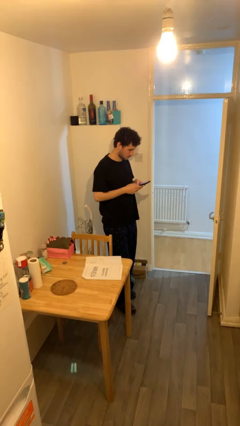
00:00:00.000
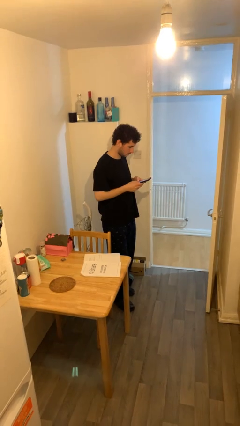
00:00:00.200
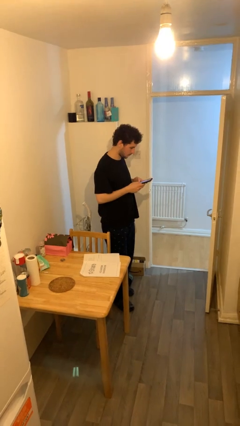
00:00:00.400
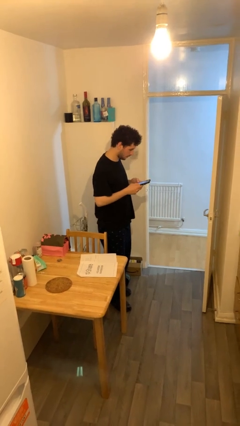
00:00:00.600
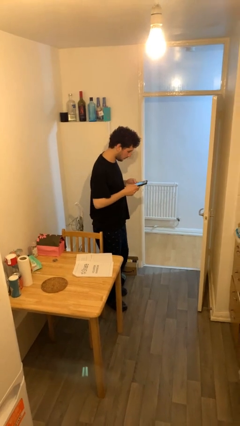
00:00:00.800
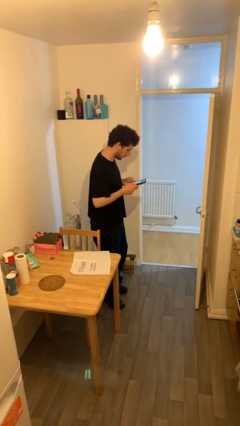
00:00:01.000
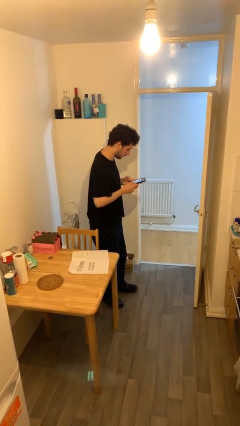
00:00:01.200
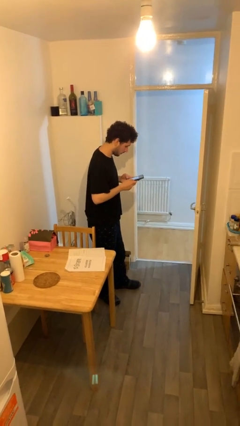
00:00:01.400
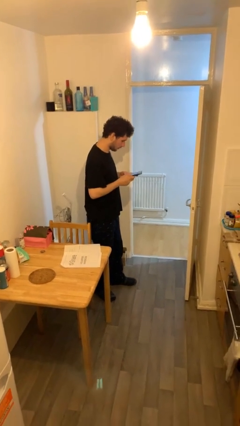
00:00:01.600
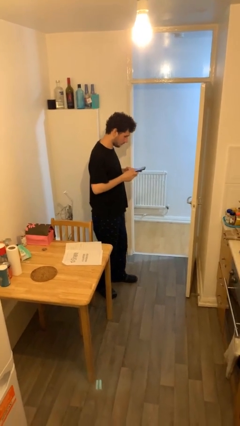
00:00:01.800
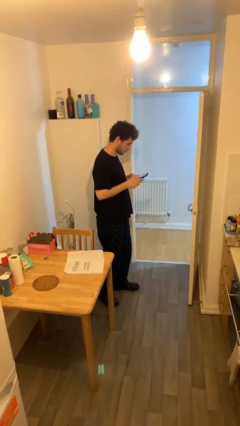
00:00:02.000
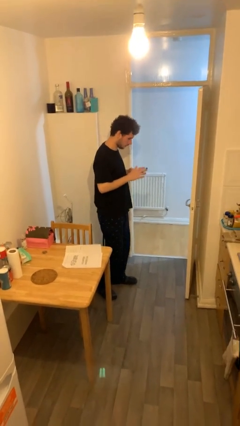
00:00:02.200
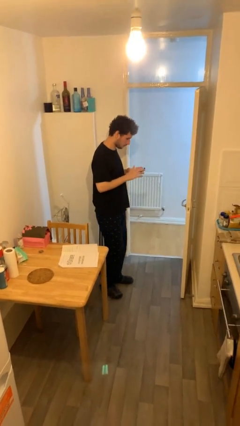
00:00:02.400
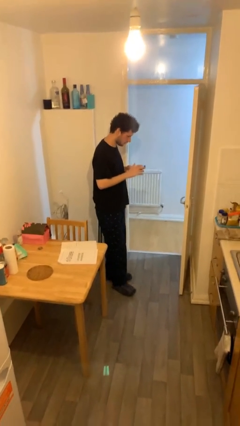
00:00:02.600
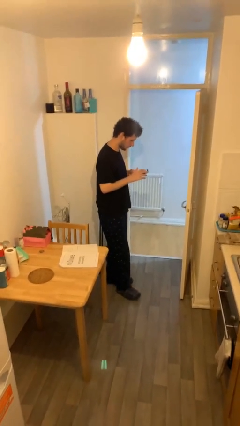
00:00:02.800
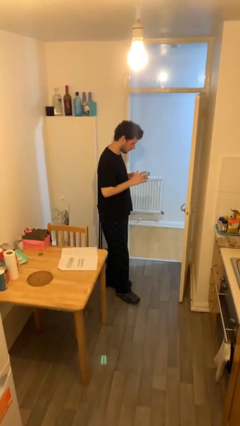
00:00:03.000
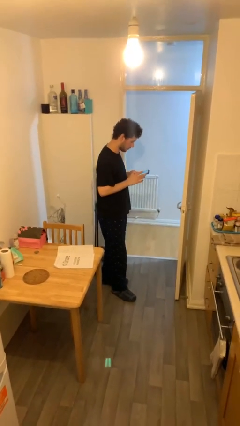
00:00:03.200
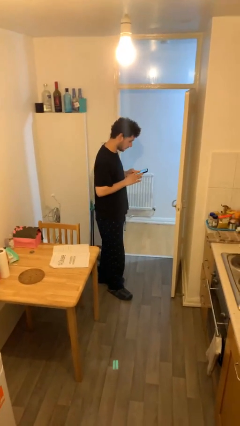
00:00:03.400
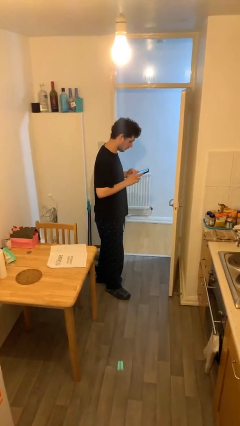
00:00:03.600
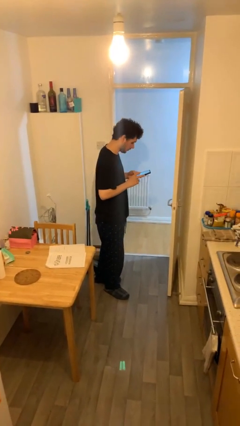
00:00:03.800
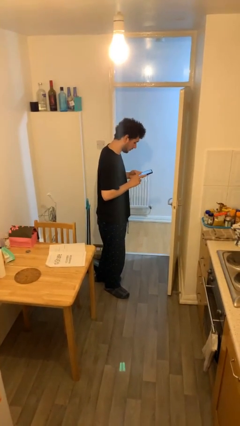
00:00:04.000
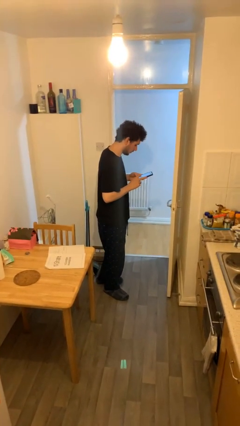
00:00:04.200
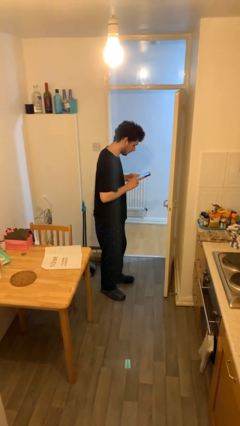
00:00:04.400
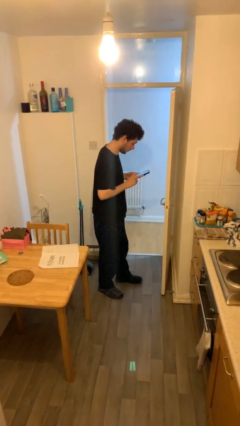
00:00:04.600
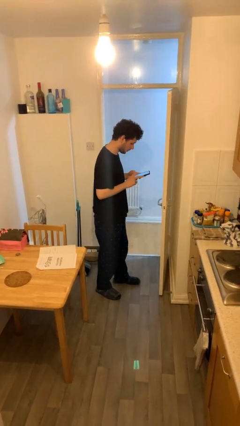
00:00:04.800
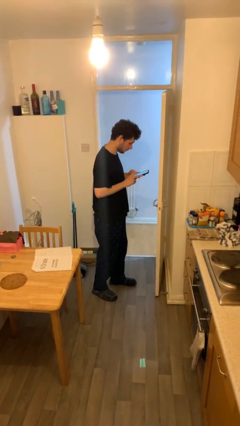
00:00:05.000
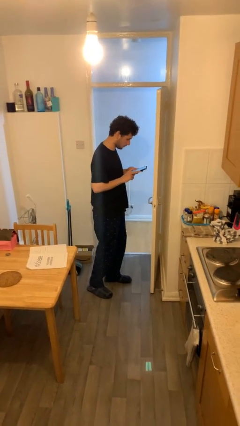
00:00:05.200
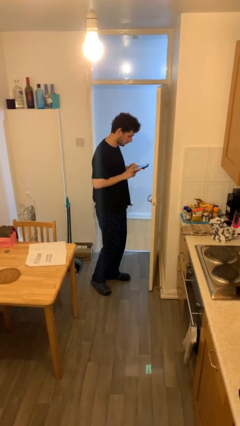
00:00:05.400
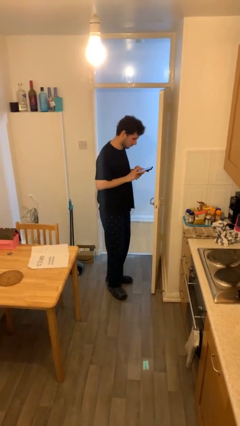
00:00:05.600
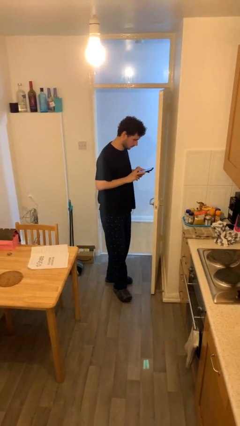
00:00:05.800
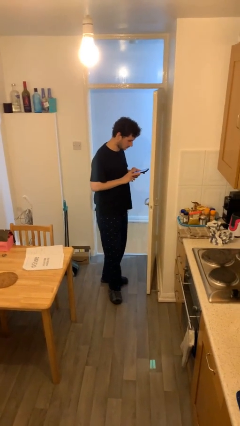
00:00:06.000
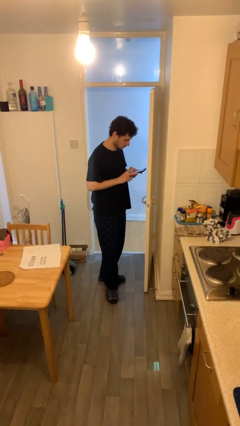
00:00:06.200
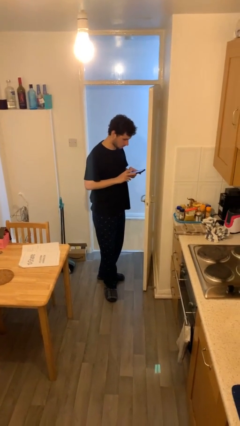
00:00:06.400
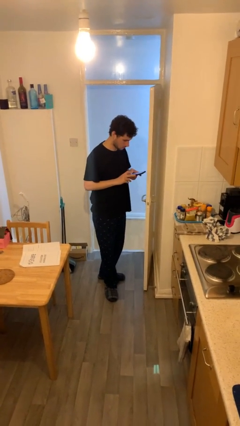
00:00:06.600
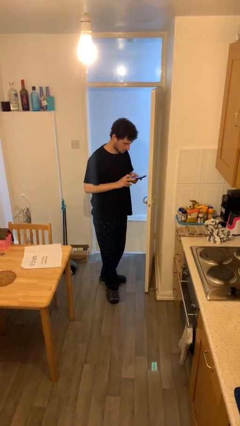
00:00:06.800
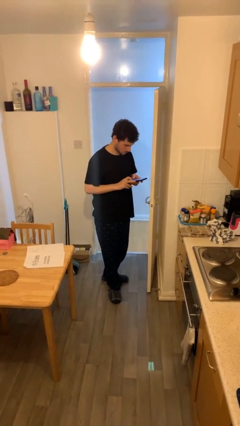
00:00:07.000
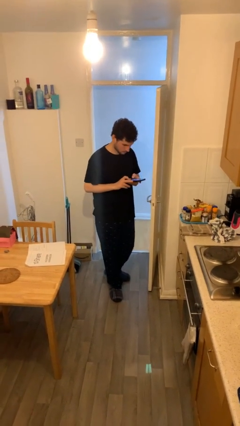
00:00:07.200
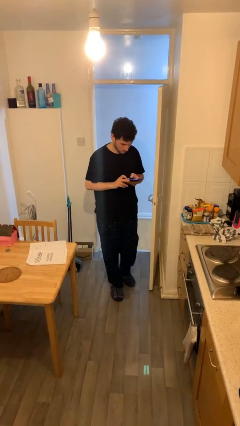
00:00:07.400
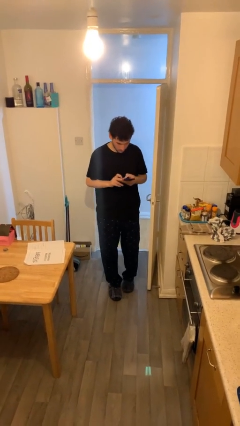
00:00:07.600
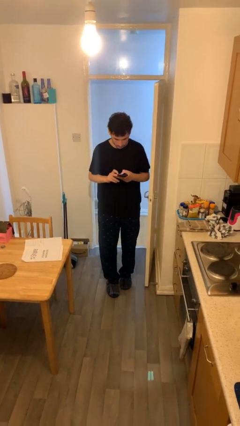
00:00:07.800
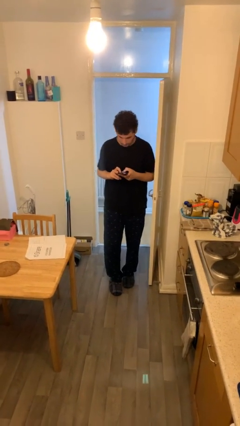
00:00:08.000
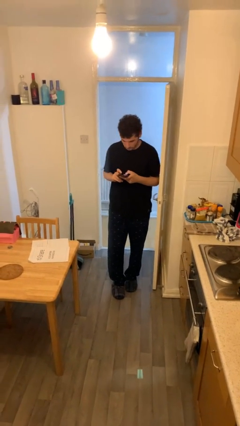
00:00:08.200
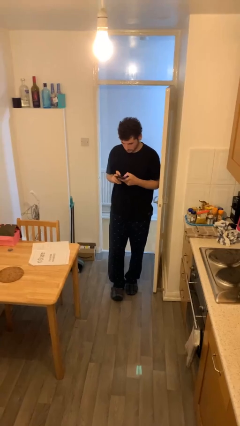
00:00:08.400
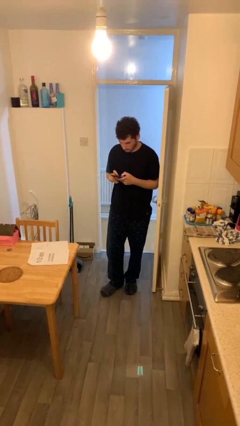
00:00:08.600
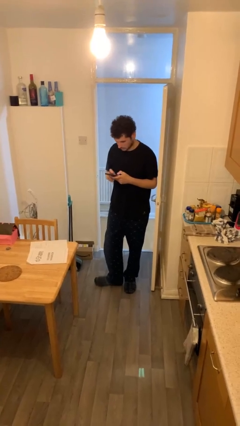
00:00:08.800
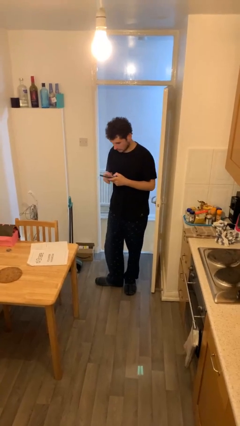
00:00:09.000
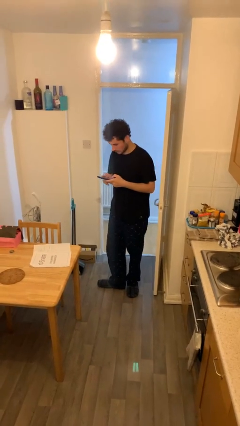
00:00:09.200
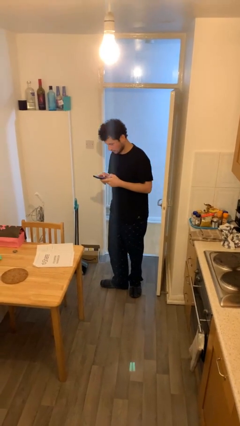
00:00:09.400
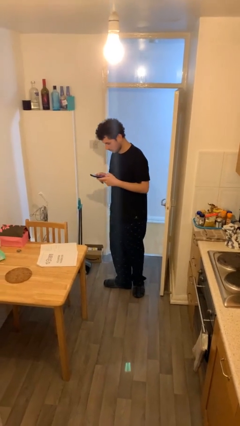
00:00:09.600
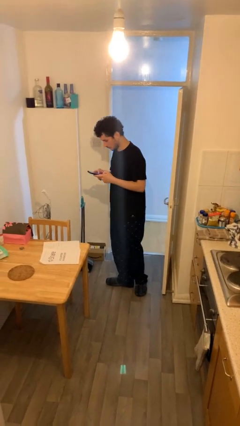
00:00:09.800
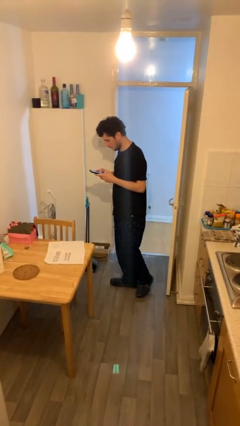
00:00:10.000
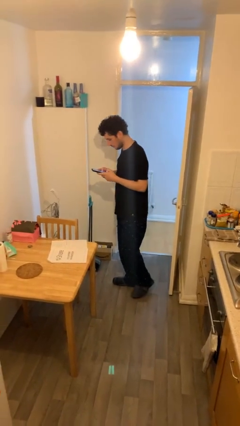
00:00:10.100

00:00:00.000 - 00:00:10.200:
person texts on phone

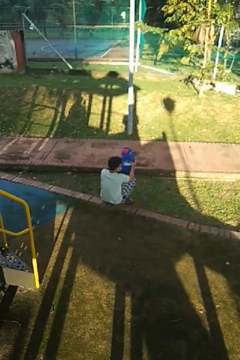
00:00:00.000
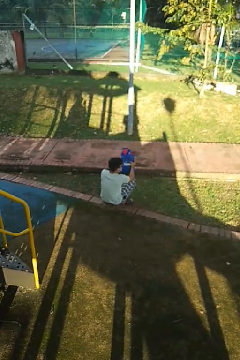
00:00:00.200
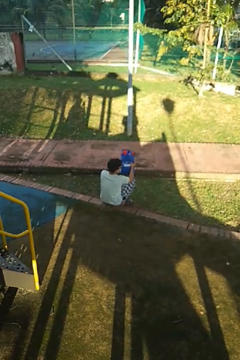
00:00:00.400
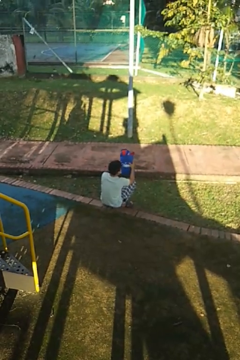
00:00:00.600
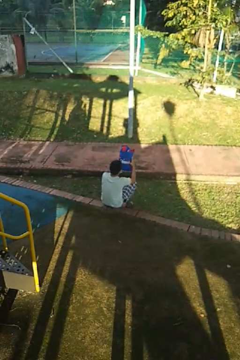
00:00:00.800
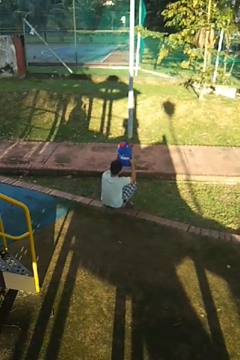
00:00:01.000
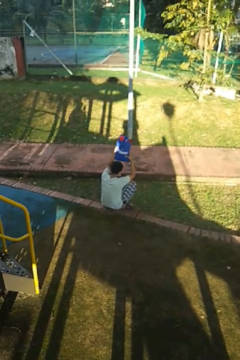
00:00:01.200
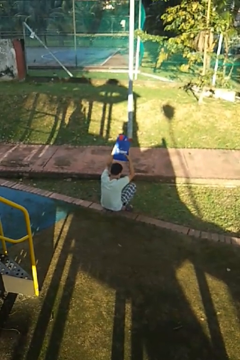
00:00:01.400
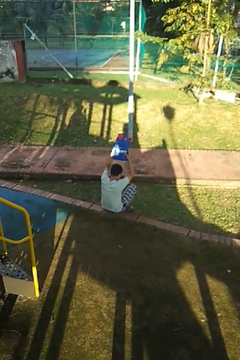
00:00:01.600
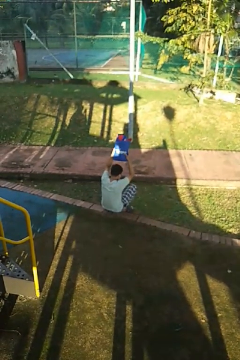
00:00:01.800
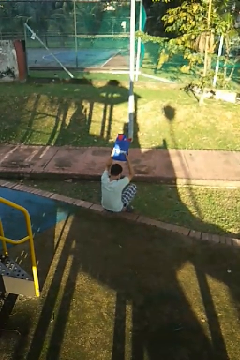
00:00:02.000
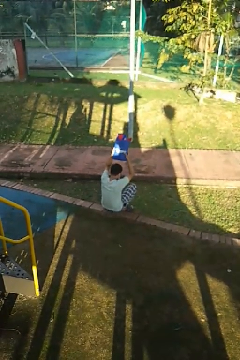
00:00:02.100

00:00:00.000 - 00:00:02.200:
person holds object above head

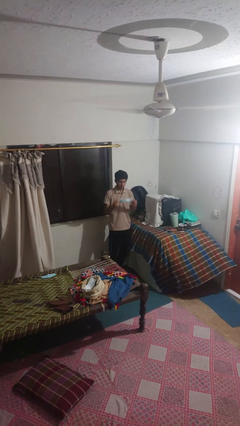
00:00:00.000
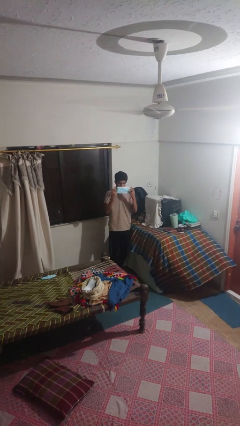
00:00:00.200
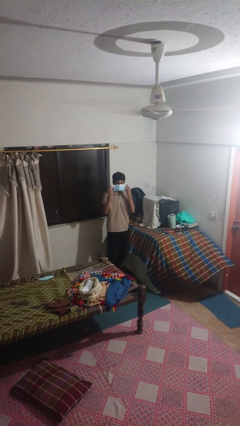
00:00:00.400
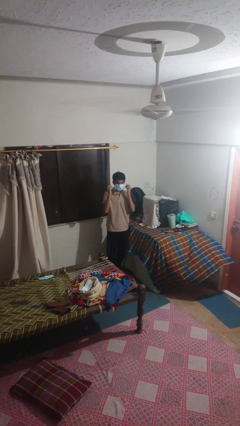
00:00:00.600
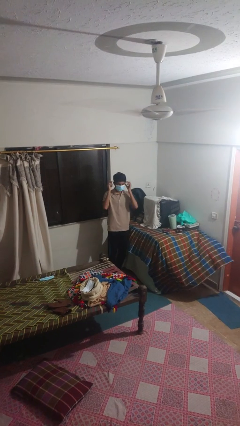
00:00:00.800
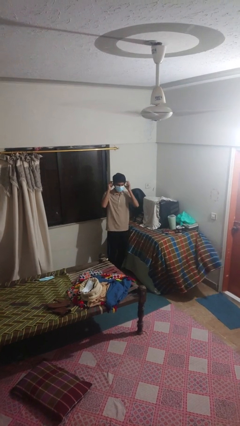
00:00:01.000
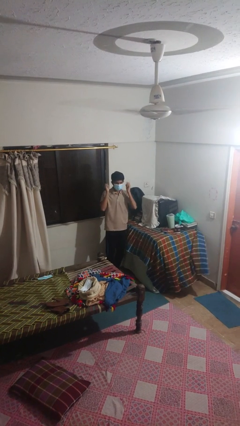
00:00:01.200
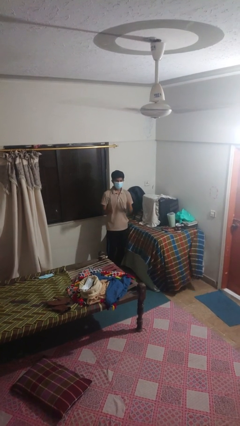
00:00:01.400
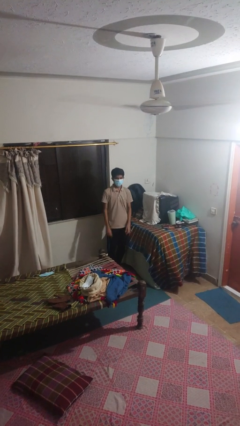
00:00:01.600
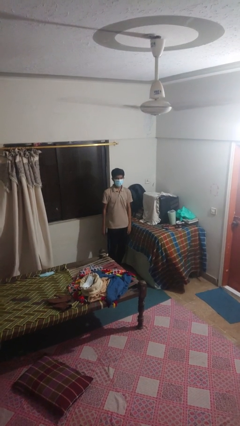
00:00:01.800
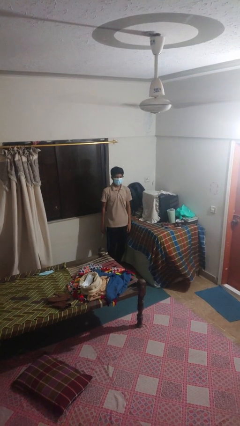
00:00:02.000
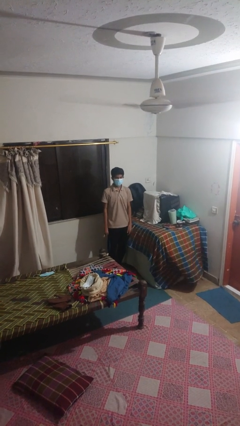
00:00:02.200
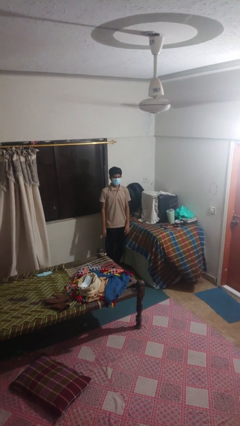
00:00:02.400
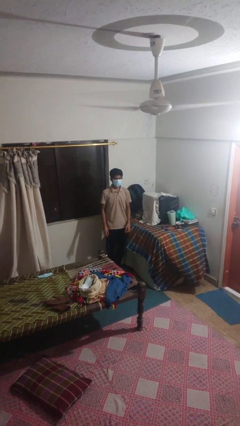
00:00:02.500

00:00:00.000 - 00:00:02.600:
person puts on facemask

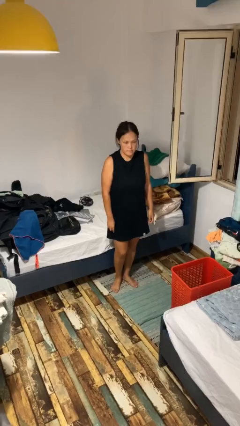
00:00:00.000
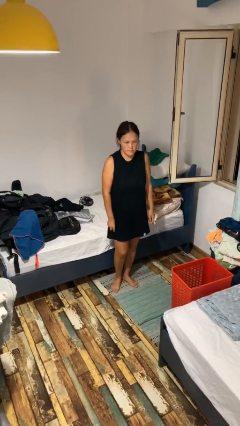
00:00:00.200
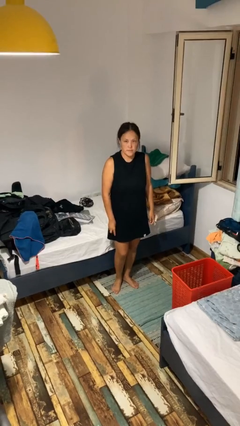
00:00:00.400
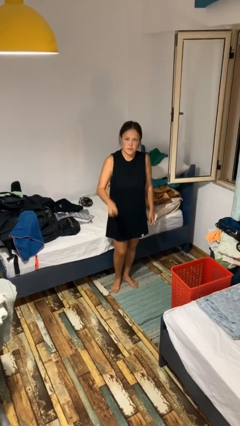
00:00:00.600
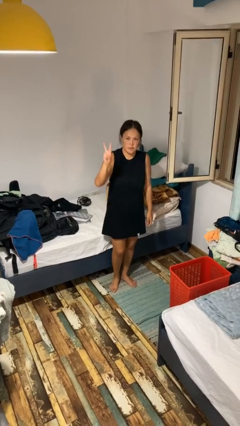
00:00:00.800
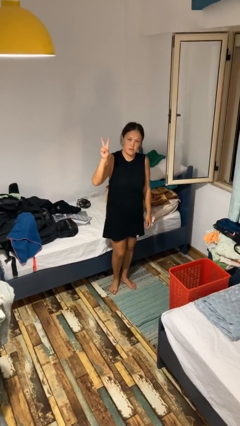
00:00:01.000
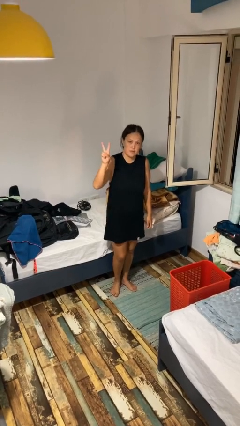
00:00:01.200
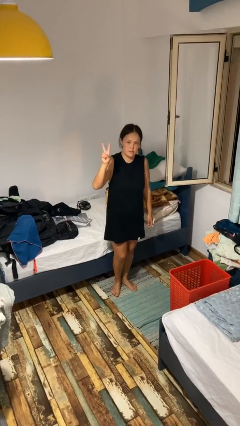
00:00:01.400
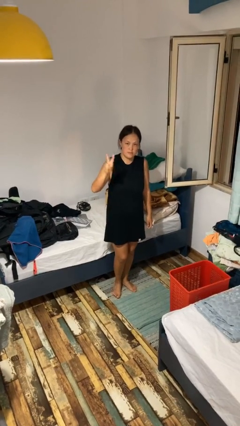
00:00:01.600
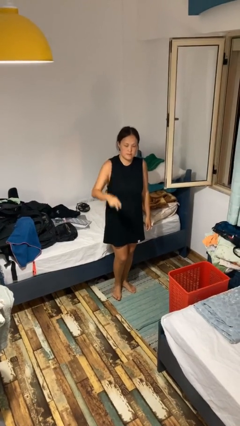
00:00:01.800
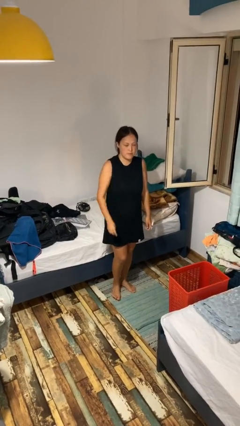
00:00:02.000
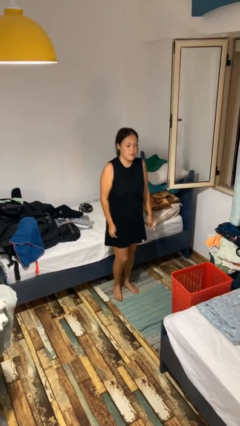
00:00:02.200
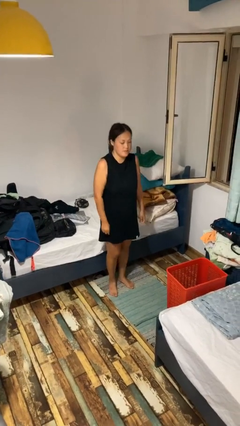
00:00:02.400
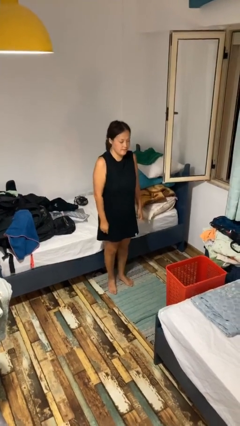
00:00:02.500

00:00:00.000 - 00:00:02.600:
person gestures peace

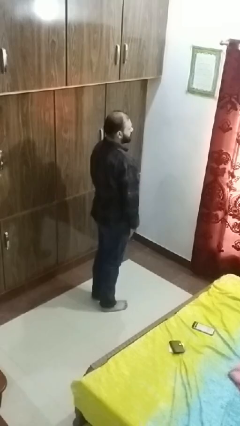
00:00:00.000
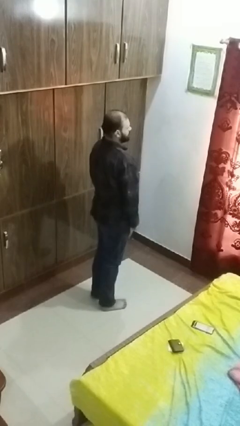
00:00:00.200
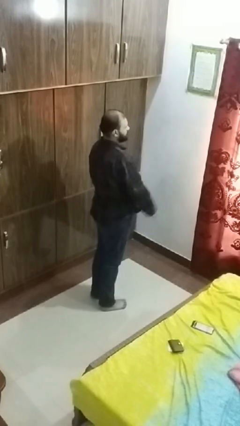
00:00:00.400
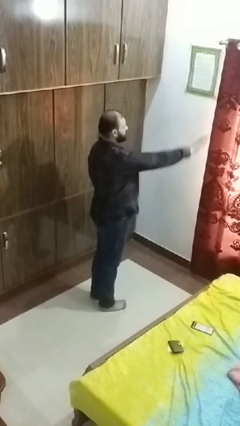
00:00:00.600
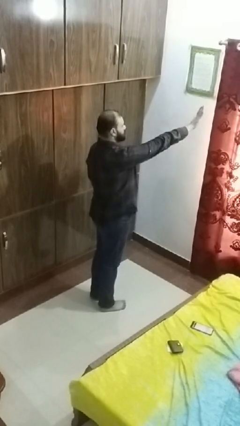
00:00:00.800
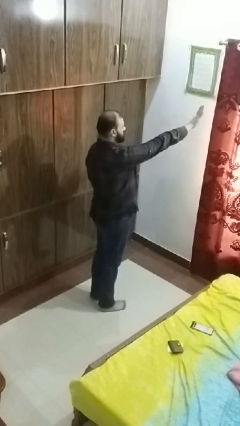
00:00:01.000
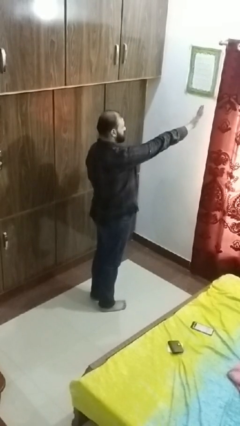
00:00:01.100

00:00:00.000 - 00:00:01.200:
person gestures stop
